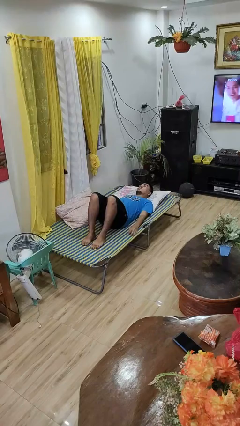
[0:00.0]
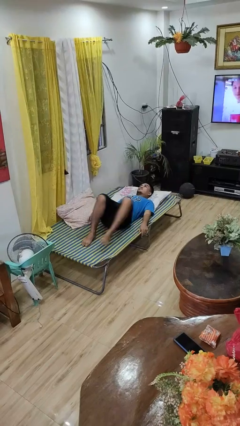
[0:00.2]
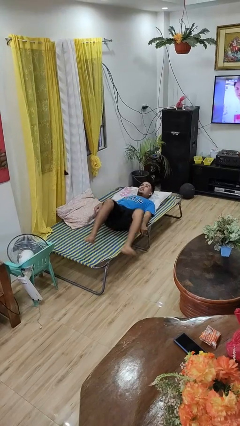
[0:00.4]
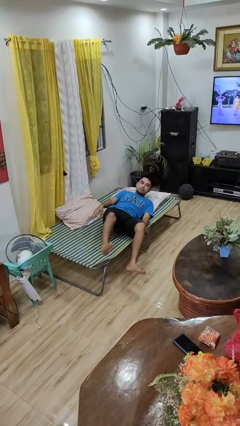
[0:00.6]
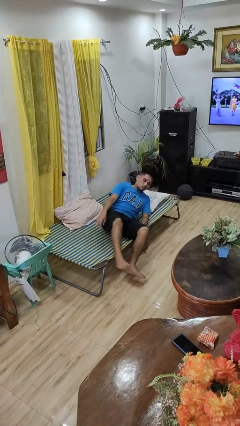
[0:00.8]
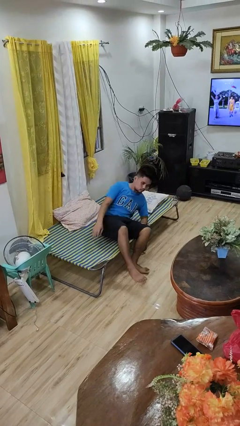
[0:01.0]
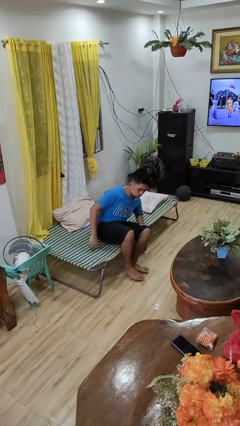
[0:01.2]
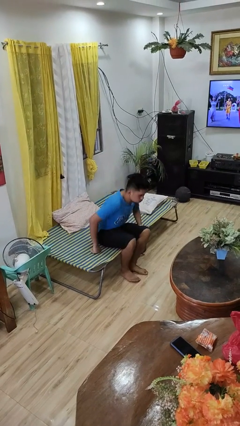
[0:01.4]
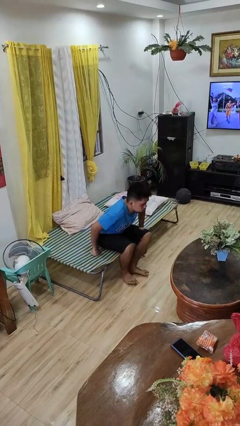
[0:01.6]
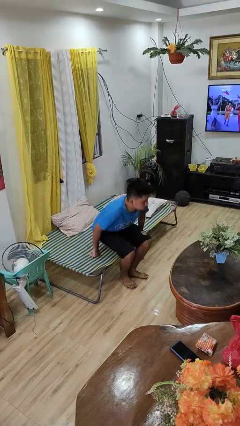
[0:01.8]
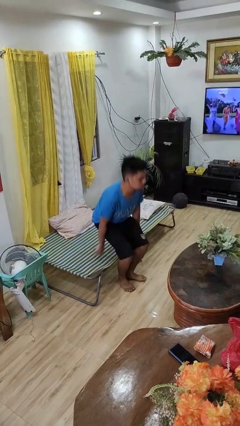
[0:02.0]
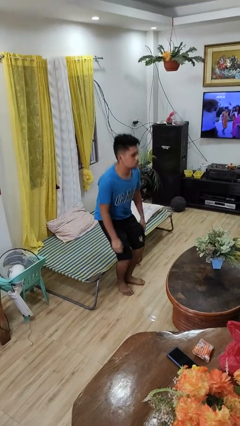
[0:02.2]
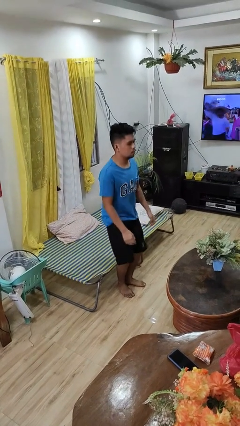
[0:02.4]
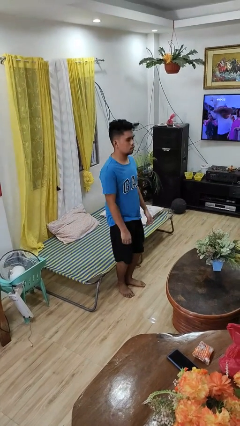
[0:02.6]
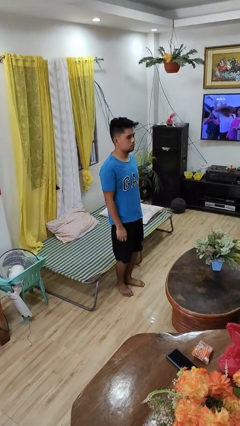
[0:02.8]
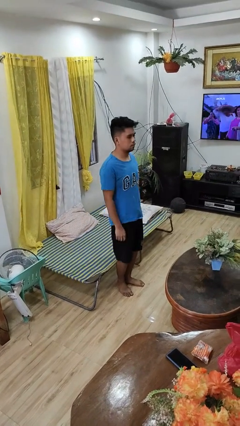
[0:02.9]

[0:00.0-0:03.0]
person stands up

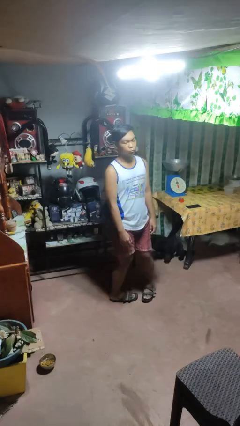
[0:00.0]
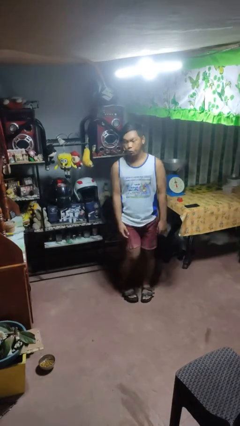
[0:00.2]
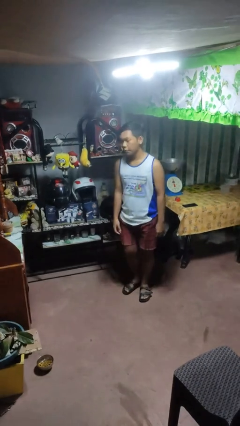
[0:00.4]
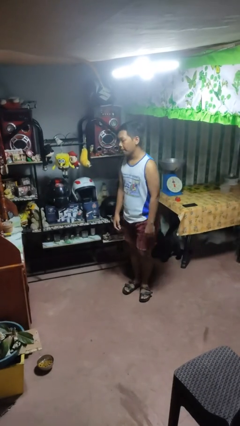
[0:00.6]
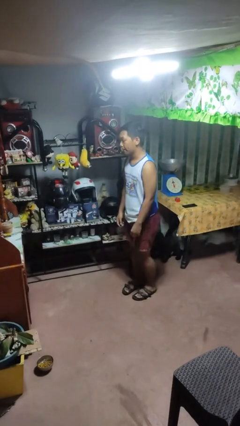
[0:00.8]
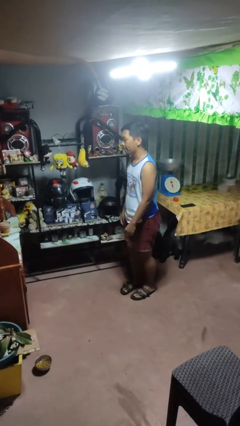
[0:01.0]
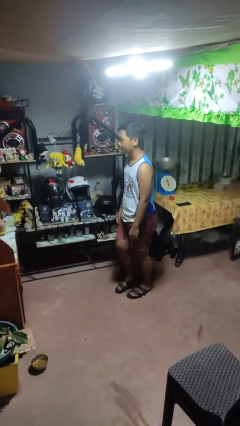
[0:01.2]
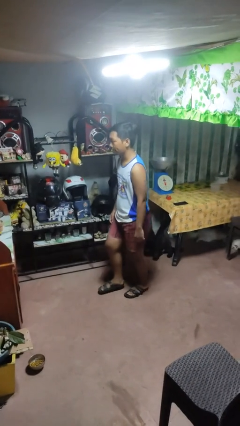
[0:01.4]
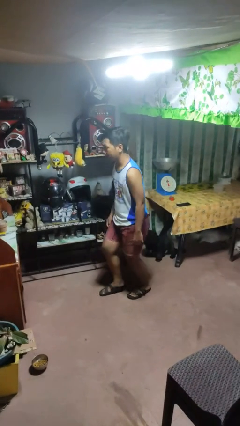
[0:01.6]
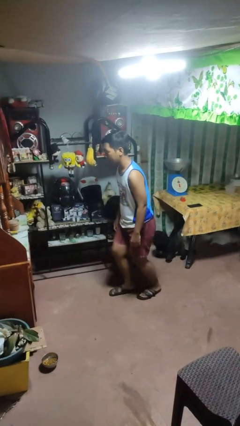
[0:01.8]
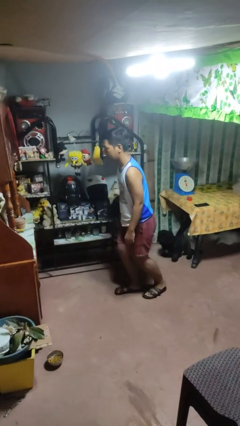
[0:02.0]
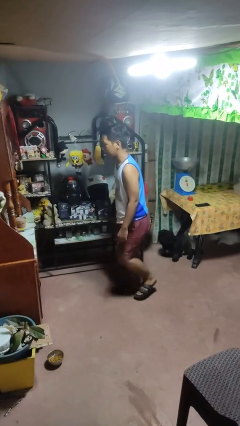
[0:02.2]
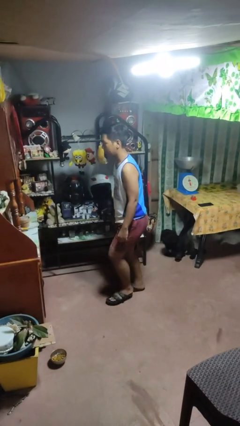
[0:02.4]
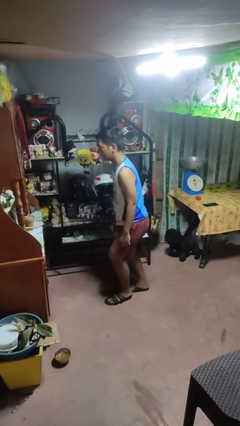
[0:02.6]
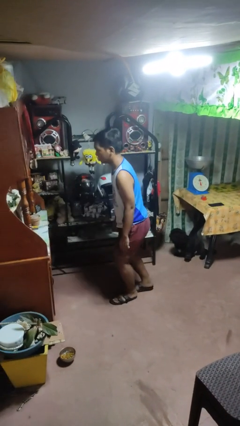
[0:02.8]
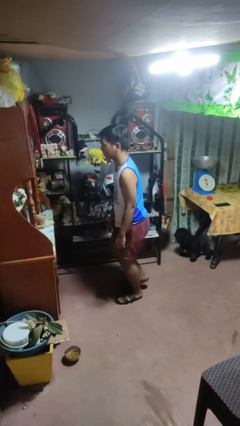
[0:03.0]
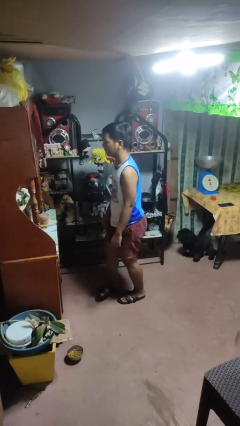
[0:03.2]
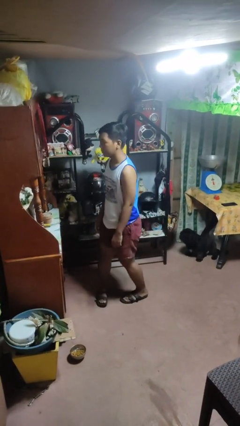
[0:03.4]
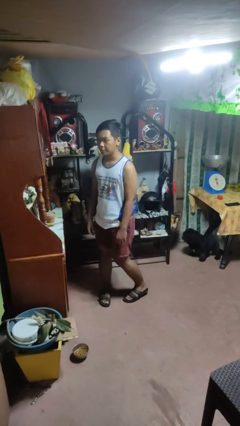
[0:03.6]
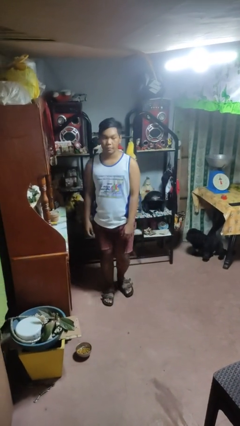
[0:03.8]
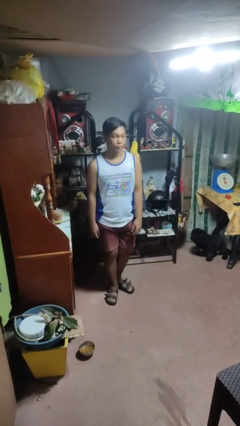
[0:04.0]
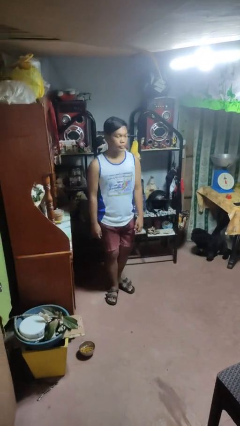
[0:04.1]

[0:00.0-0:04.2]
person walks tiptoe

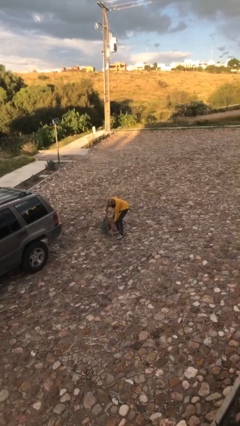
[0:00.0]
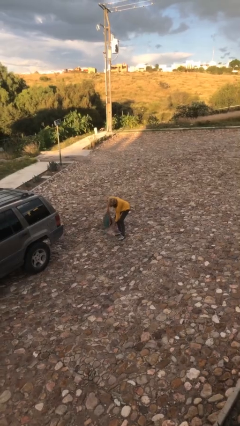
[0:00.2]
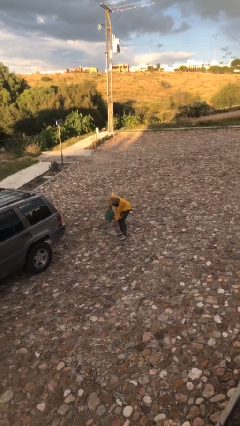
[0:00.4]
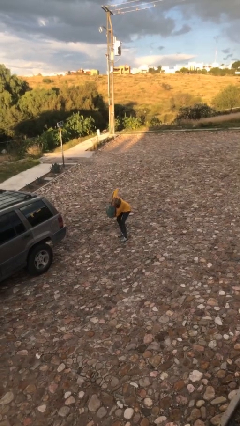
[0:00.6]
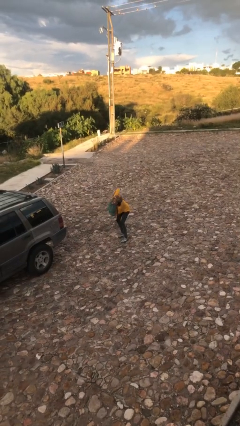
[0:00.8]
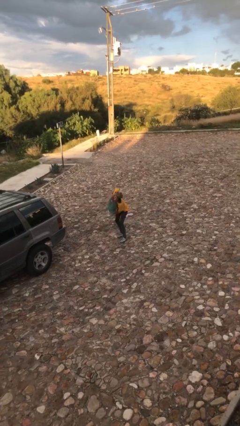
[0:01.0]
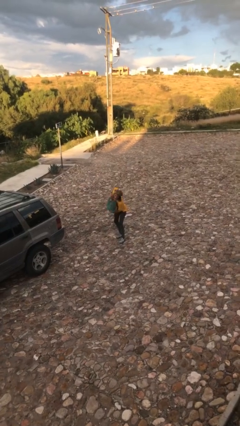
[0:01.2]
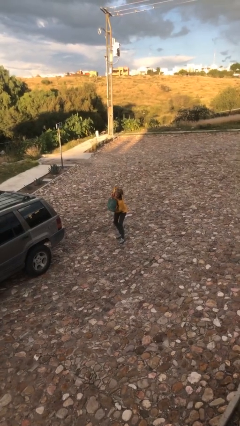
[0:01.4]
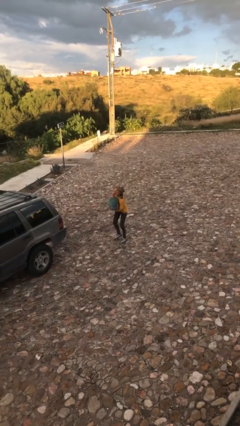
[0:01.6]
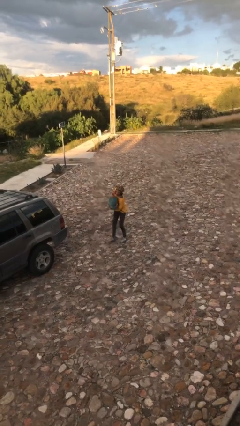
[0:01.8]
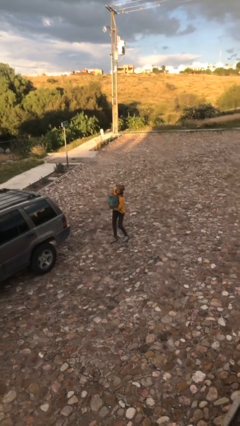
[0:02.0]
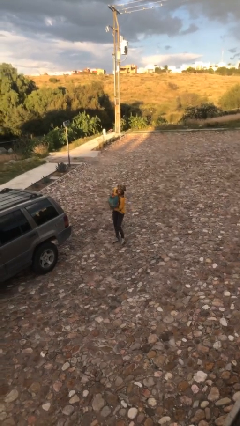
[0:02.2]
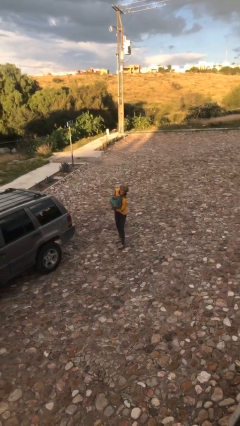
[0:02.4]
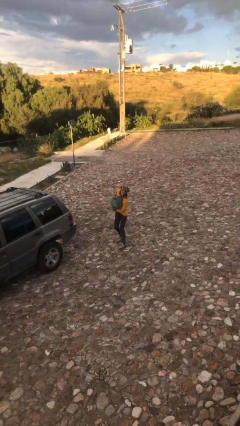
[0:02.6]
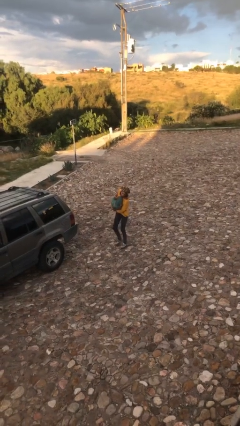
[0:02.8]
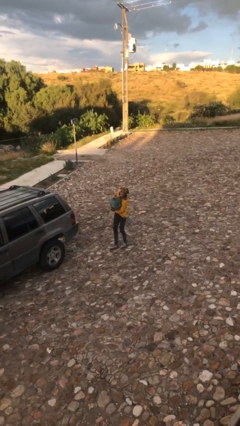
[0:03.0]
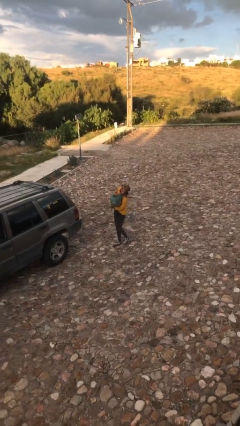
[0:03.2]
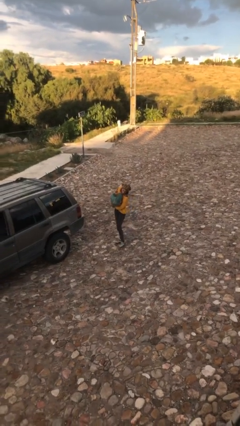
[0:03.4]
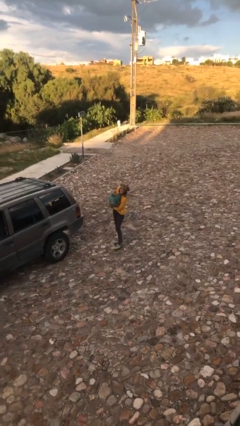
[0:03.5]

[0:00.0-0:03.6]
person carries heavy object

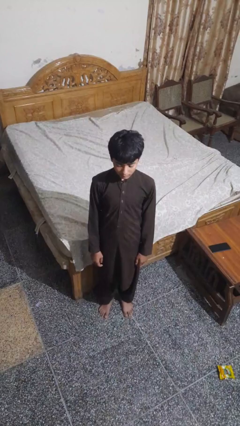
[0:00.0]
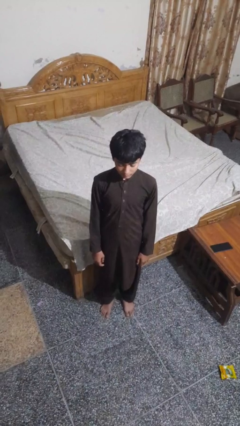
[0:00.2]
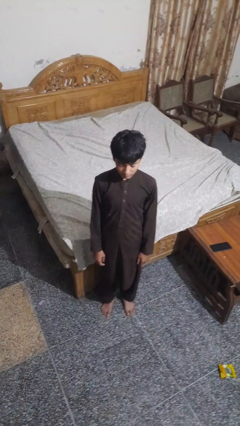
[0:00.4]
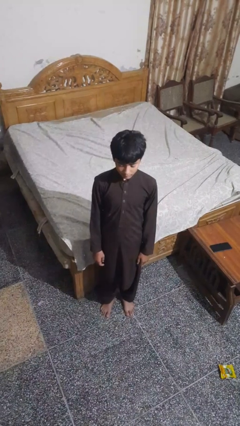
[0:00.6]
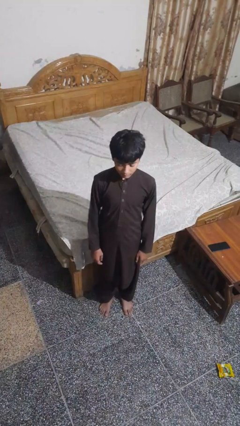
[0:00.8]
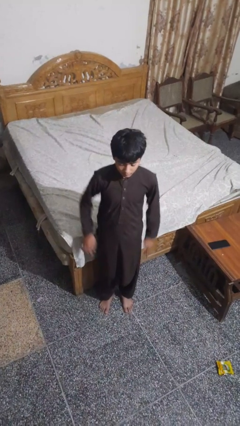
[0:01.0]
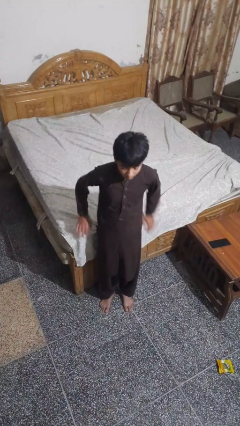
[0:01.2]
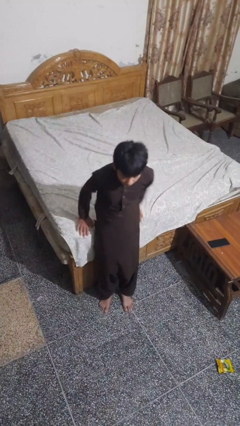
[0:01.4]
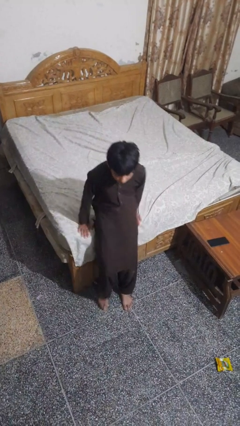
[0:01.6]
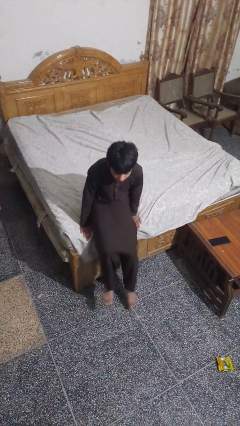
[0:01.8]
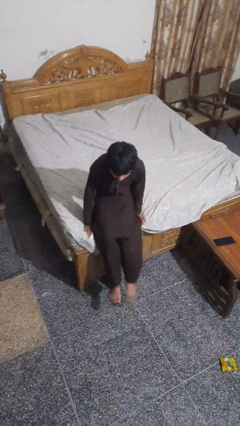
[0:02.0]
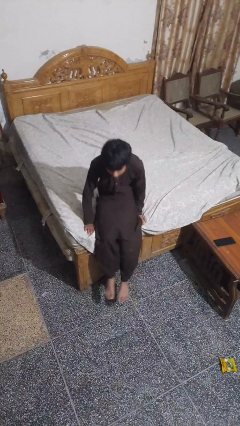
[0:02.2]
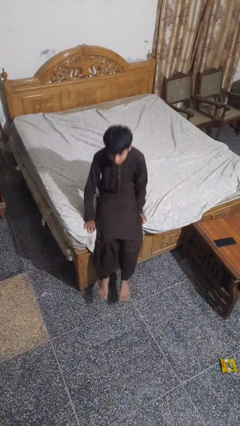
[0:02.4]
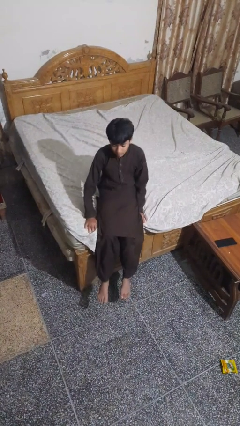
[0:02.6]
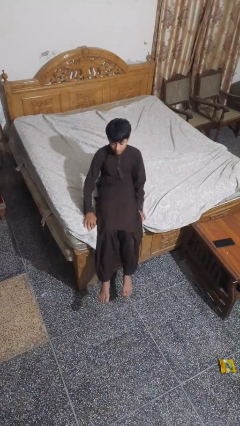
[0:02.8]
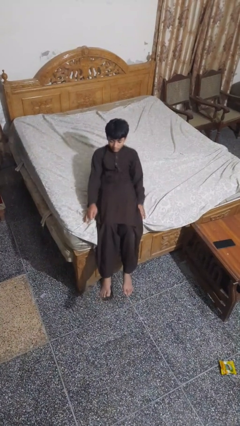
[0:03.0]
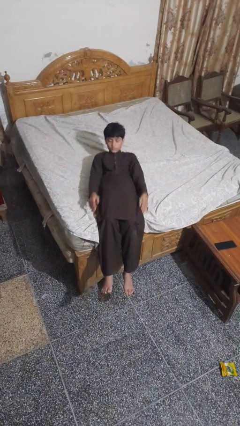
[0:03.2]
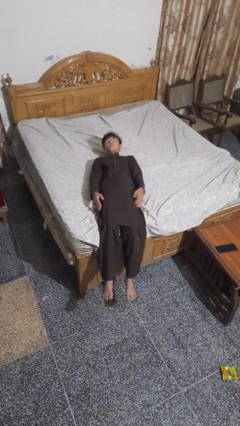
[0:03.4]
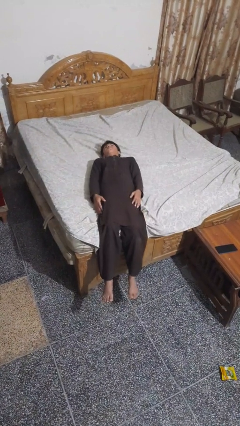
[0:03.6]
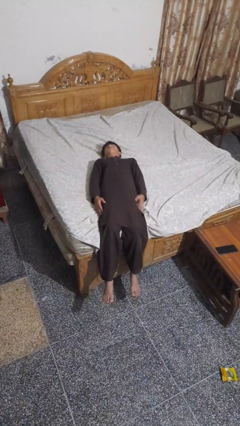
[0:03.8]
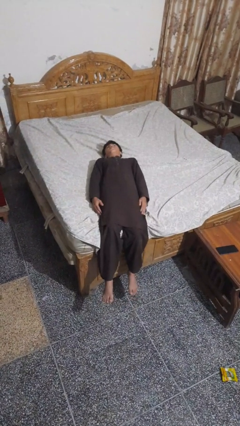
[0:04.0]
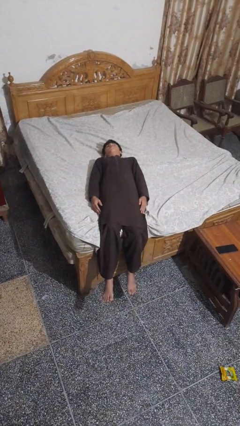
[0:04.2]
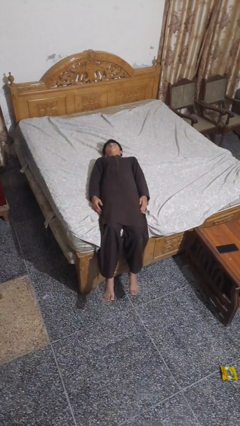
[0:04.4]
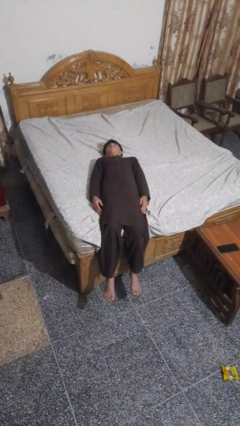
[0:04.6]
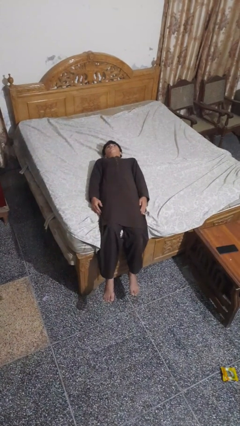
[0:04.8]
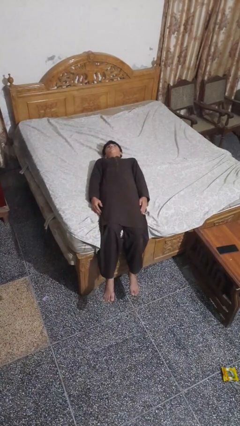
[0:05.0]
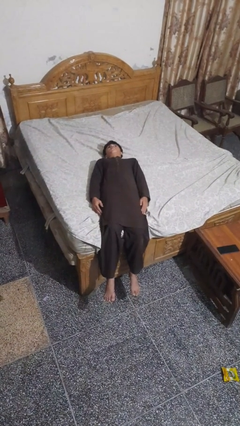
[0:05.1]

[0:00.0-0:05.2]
person lies down on bed

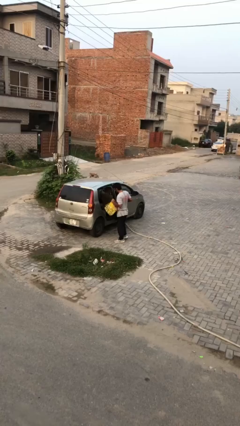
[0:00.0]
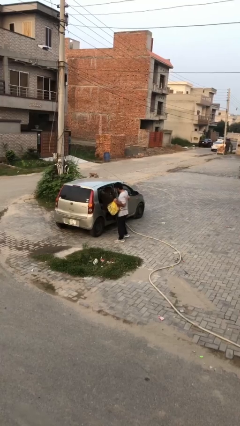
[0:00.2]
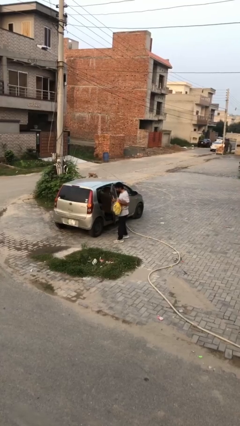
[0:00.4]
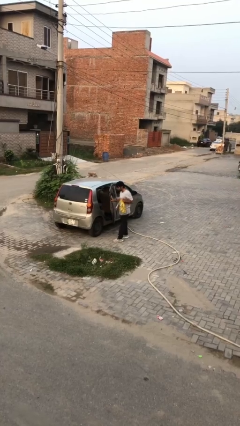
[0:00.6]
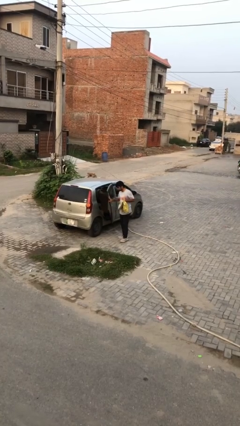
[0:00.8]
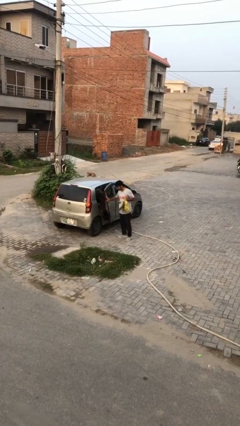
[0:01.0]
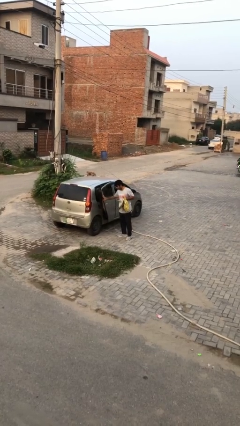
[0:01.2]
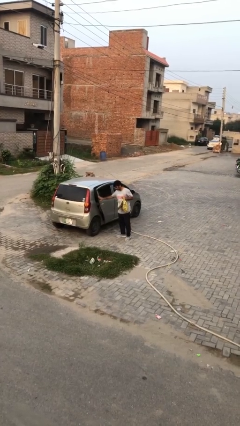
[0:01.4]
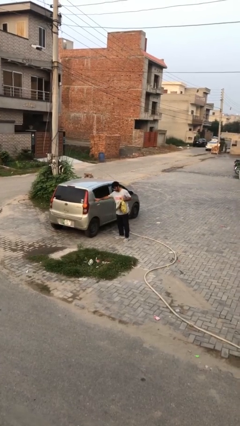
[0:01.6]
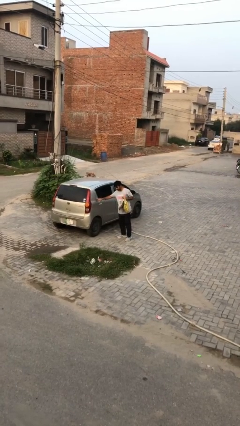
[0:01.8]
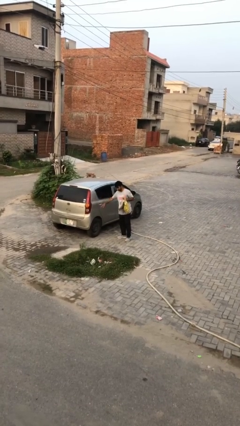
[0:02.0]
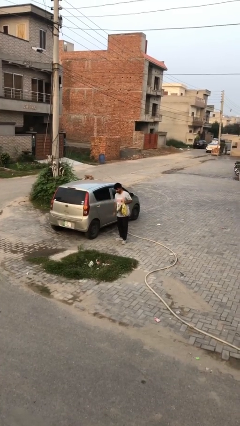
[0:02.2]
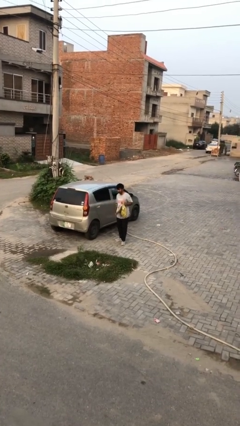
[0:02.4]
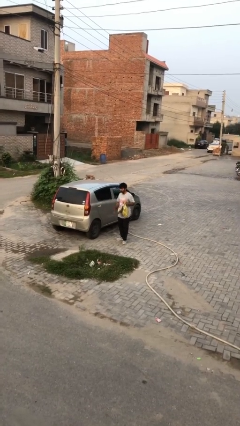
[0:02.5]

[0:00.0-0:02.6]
person closes car door
